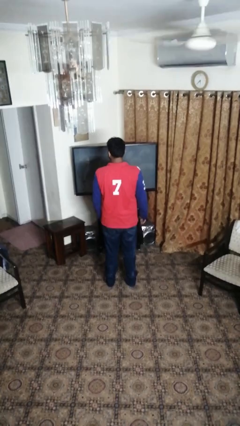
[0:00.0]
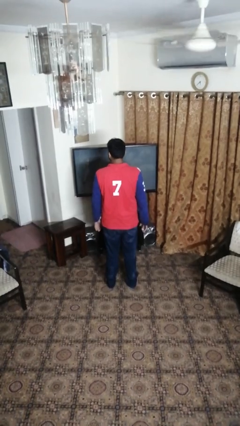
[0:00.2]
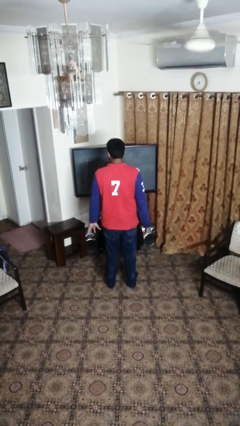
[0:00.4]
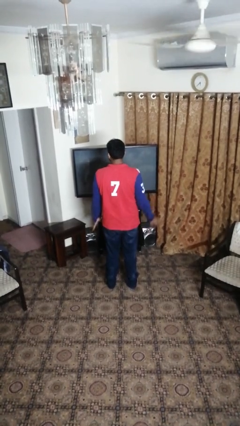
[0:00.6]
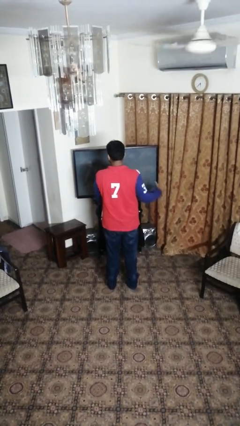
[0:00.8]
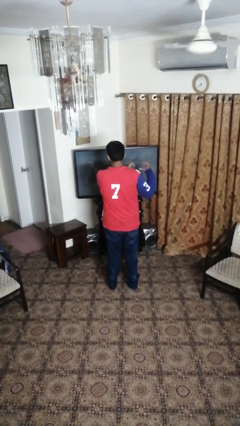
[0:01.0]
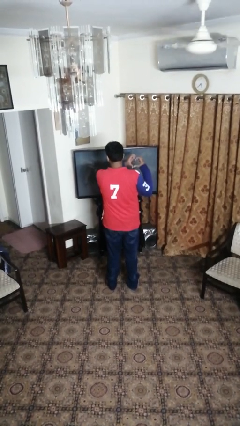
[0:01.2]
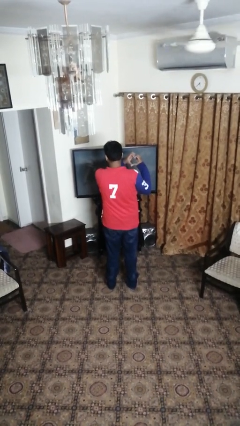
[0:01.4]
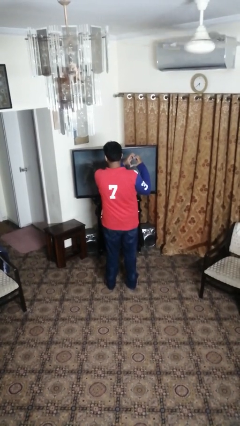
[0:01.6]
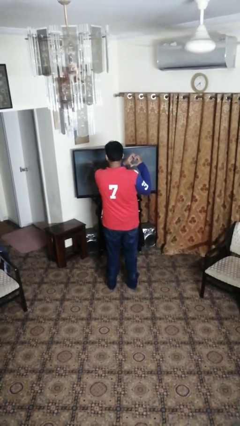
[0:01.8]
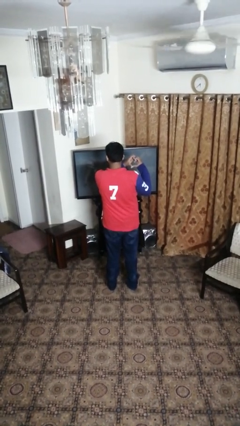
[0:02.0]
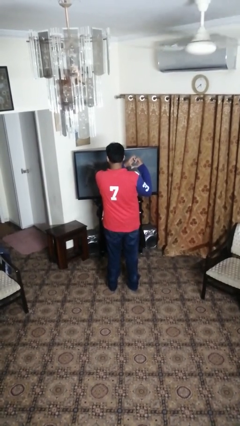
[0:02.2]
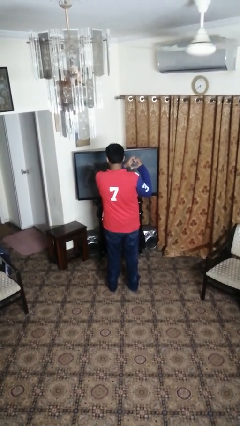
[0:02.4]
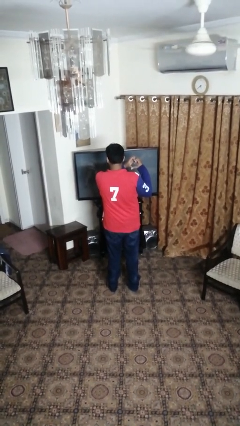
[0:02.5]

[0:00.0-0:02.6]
person gestures heart

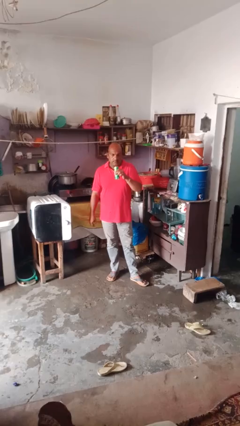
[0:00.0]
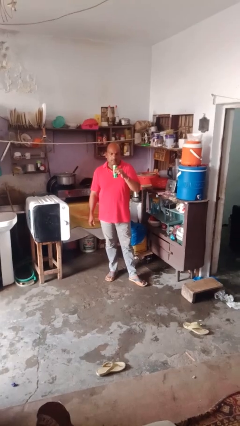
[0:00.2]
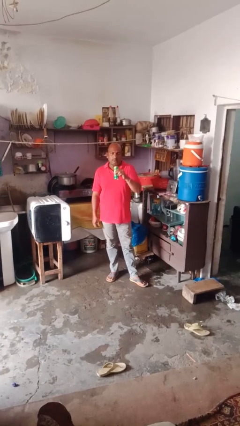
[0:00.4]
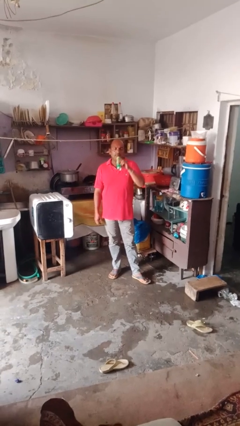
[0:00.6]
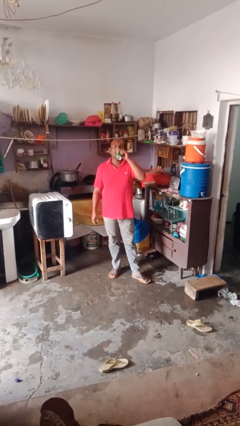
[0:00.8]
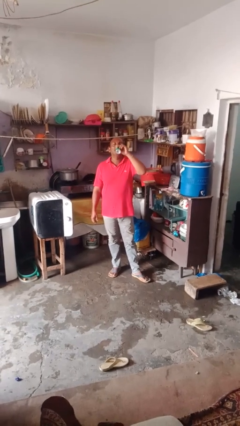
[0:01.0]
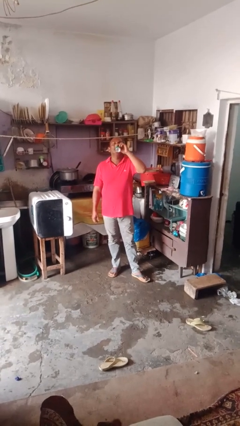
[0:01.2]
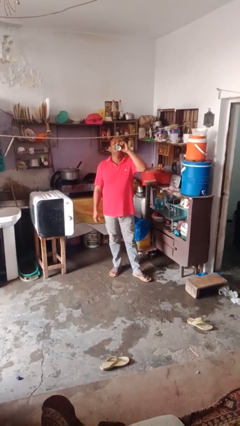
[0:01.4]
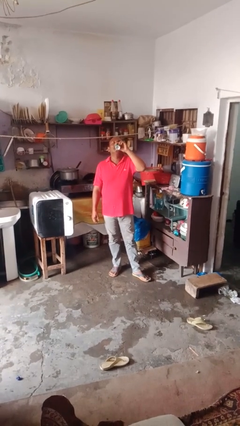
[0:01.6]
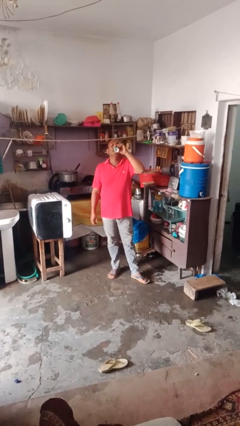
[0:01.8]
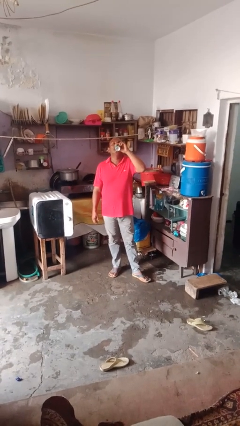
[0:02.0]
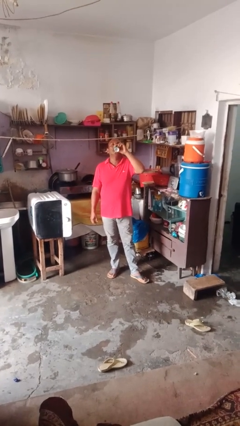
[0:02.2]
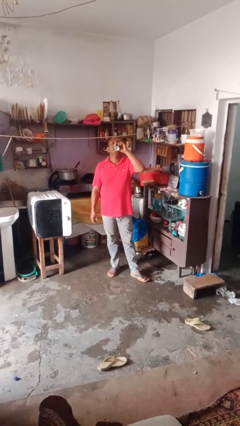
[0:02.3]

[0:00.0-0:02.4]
person drinks from beverage can

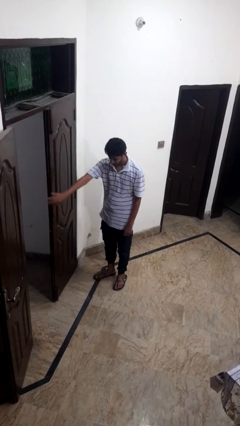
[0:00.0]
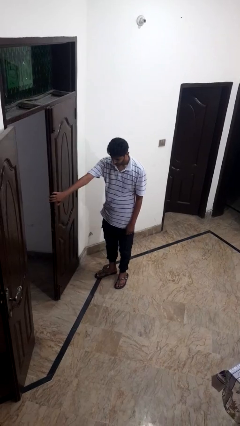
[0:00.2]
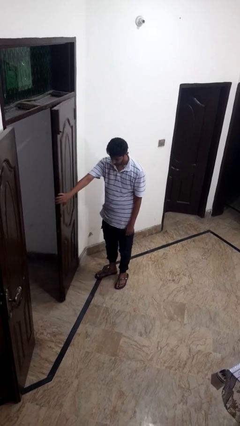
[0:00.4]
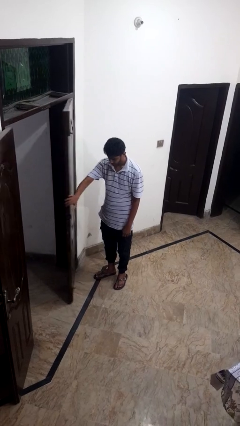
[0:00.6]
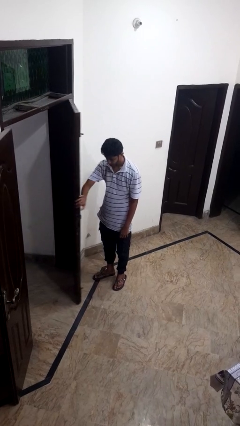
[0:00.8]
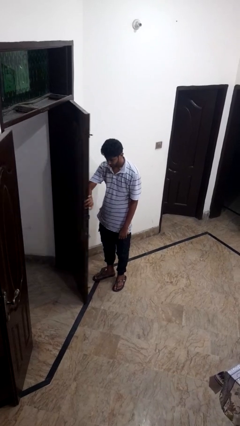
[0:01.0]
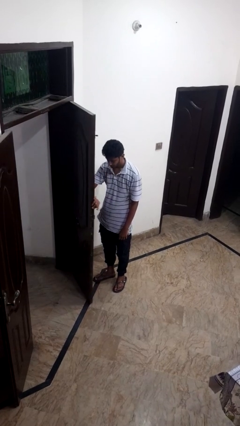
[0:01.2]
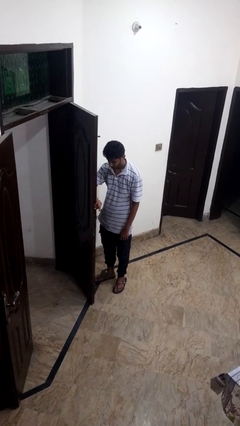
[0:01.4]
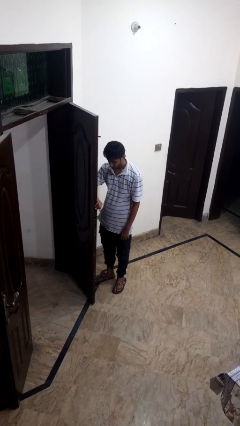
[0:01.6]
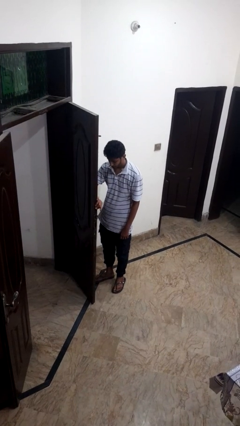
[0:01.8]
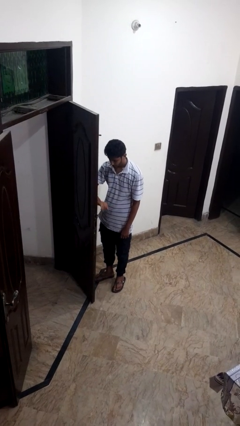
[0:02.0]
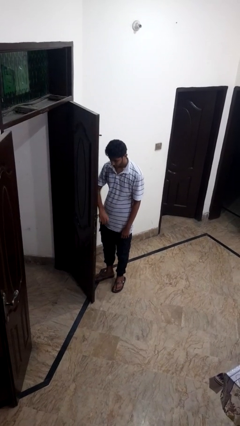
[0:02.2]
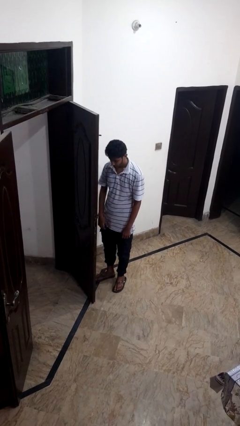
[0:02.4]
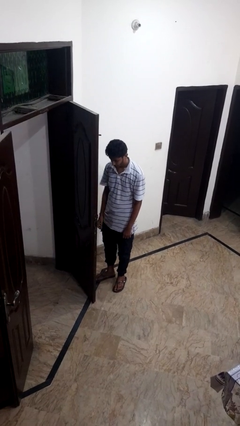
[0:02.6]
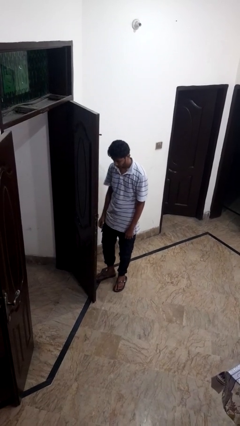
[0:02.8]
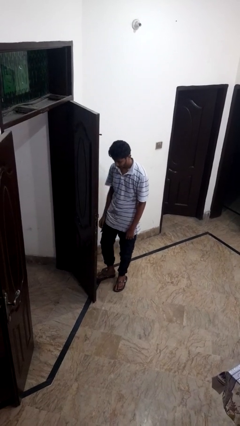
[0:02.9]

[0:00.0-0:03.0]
person opens facility door

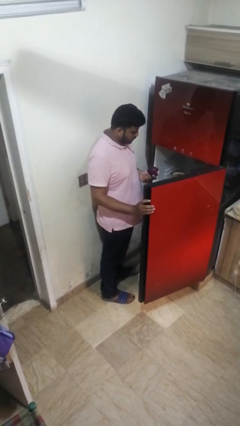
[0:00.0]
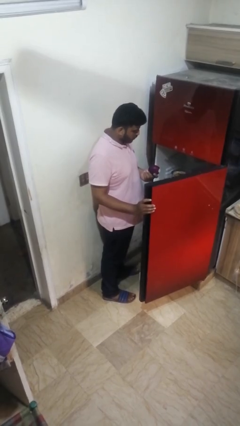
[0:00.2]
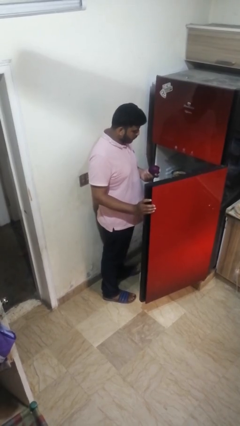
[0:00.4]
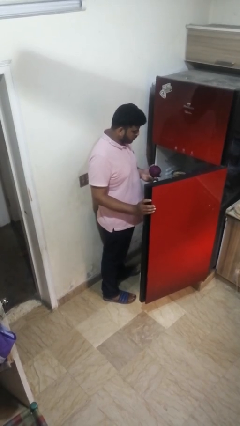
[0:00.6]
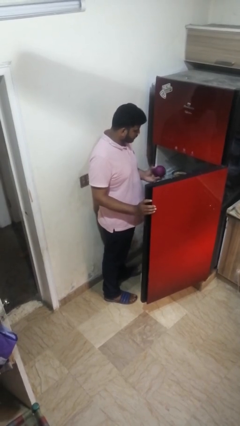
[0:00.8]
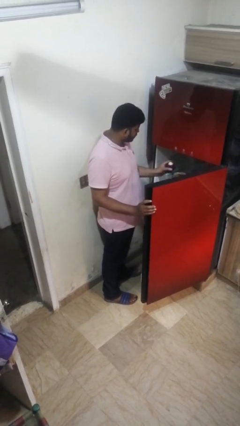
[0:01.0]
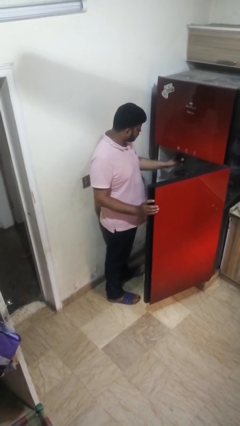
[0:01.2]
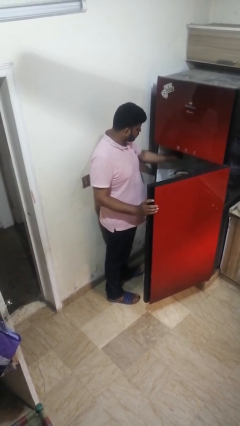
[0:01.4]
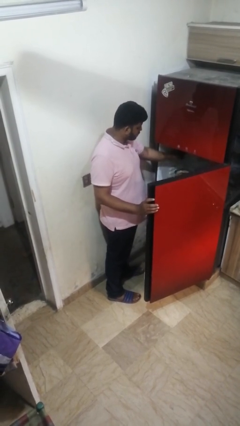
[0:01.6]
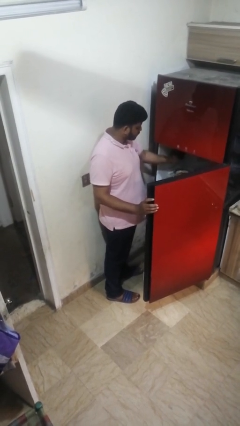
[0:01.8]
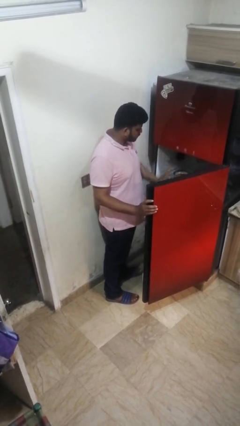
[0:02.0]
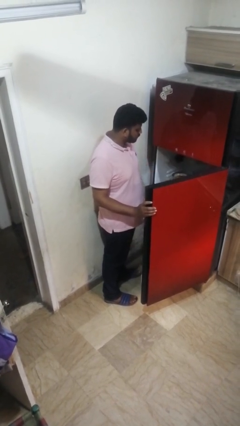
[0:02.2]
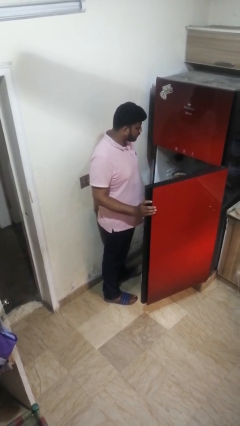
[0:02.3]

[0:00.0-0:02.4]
person puts object into refrigerator

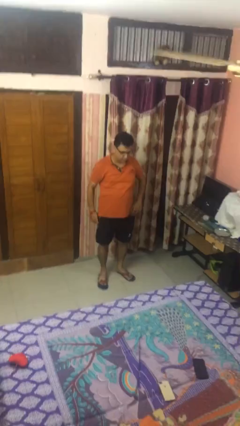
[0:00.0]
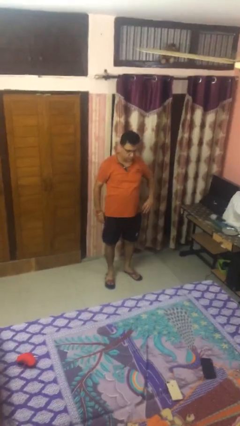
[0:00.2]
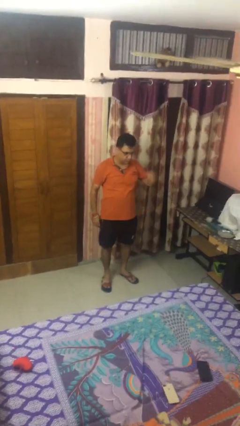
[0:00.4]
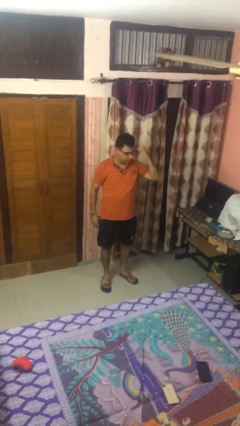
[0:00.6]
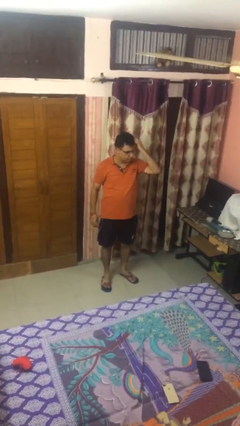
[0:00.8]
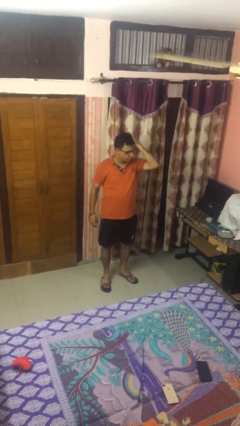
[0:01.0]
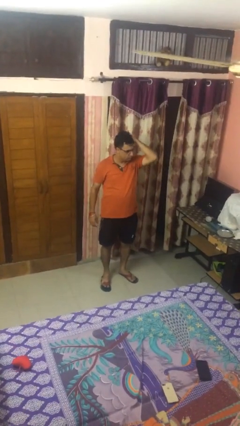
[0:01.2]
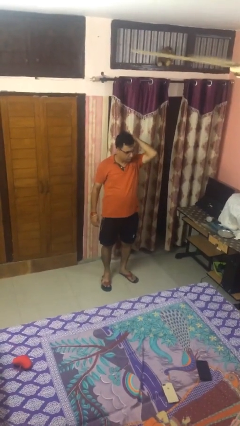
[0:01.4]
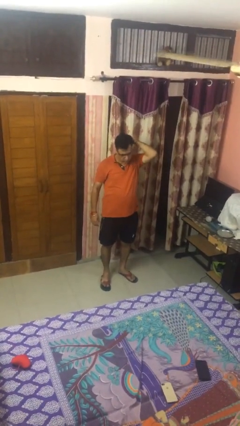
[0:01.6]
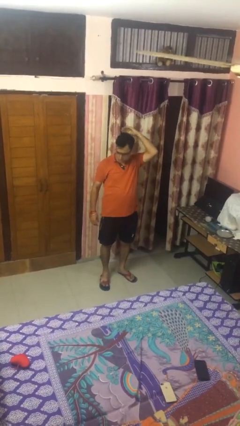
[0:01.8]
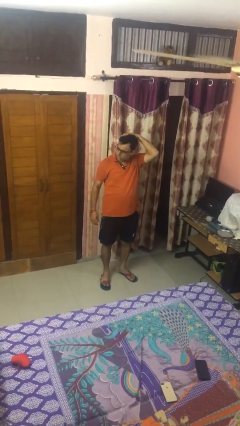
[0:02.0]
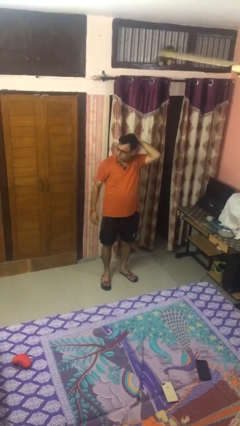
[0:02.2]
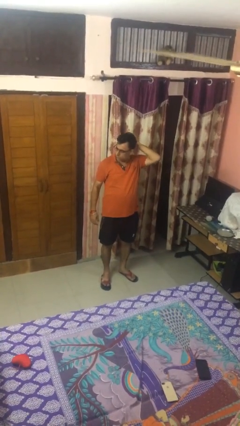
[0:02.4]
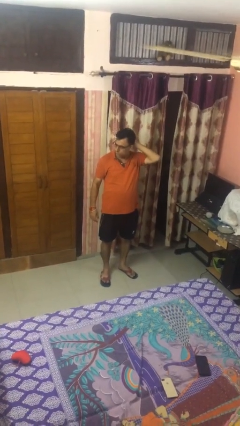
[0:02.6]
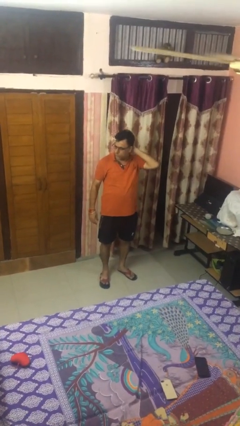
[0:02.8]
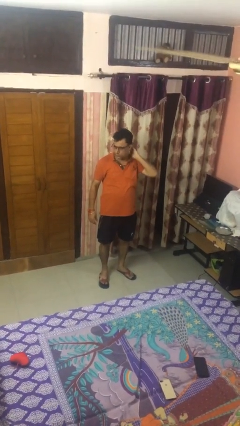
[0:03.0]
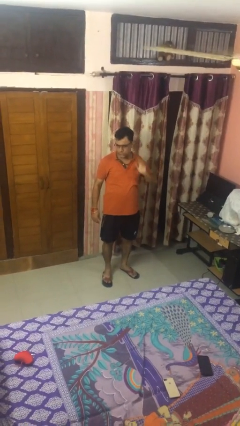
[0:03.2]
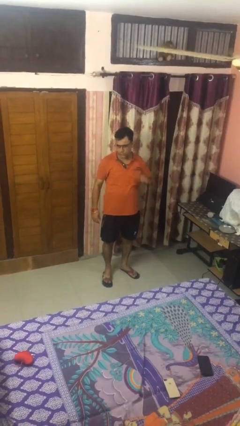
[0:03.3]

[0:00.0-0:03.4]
person strokes hair

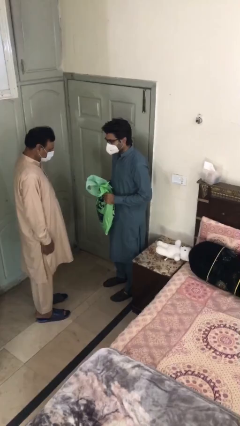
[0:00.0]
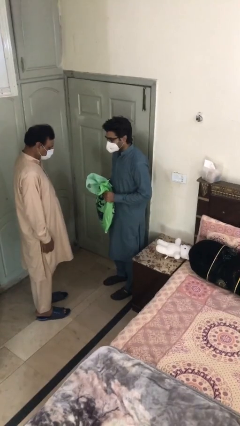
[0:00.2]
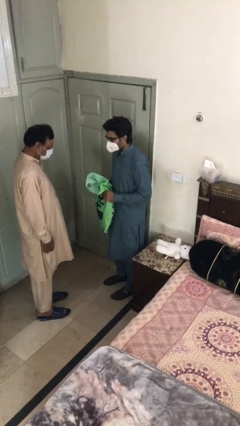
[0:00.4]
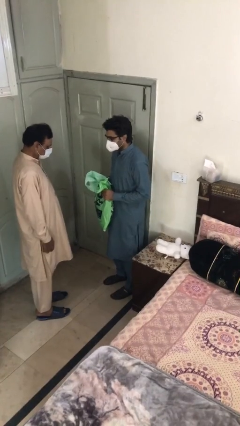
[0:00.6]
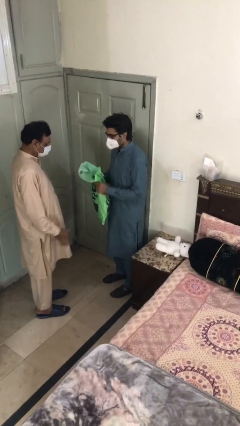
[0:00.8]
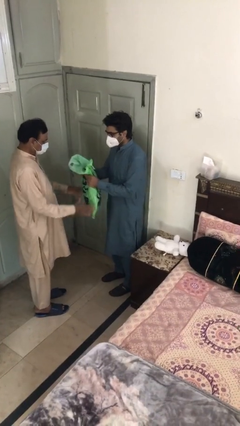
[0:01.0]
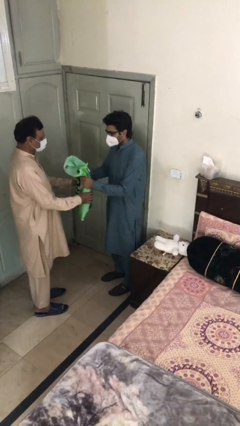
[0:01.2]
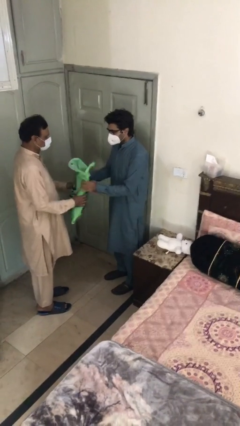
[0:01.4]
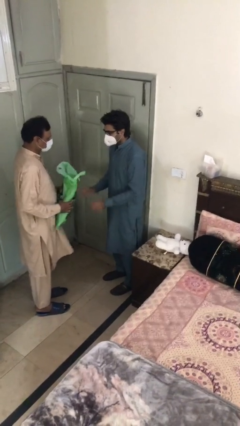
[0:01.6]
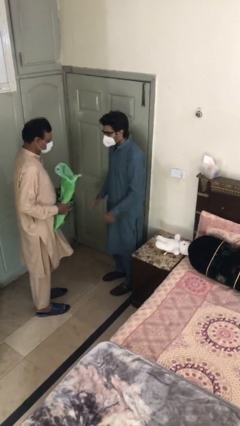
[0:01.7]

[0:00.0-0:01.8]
person transfers object to person

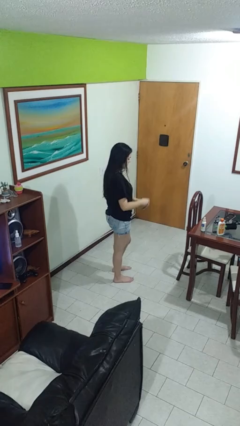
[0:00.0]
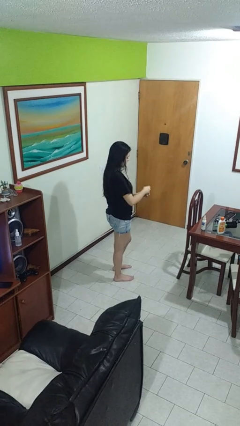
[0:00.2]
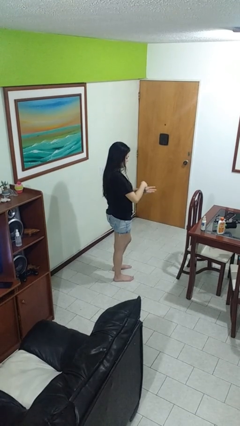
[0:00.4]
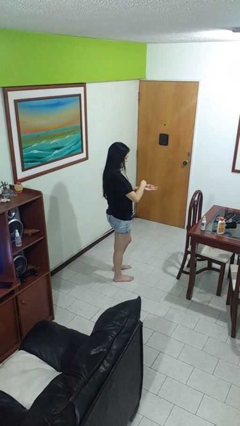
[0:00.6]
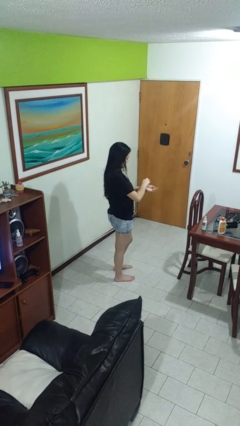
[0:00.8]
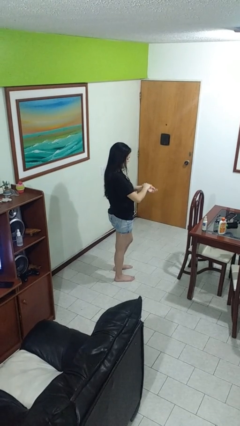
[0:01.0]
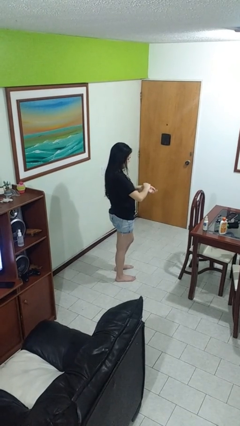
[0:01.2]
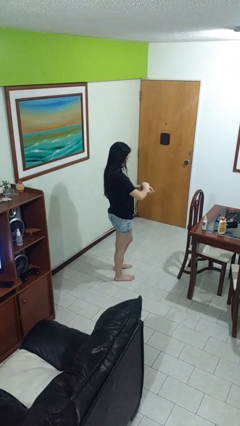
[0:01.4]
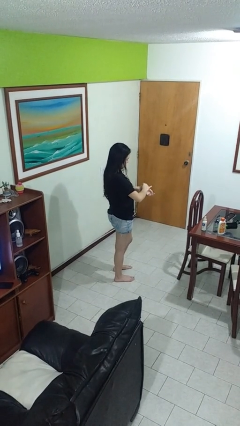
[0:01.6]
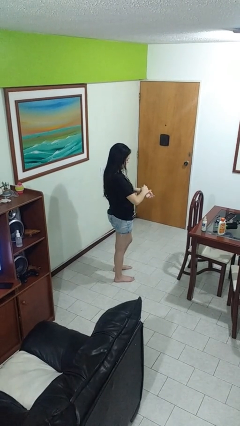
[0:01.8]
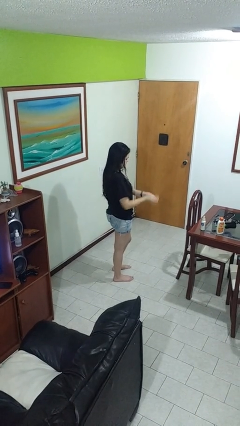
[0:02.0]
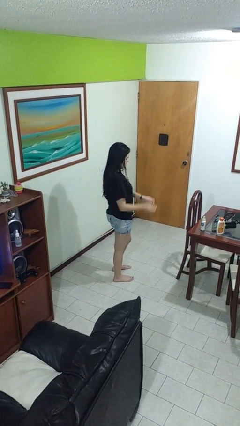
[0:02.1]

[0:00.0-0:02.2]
person puts on wristwatch
